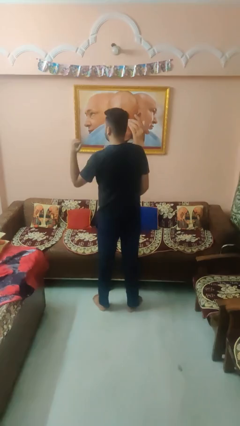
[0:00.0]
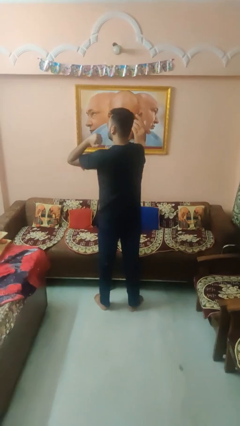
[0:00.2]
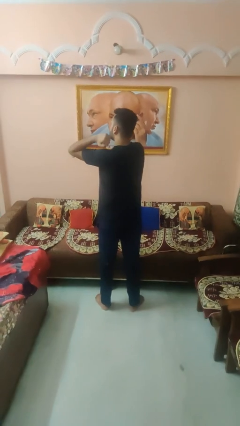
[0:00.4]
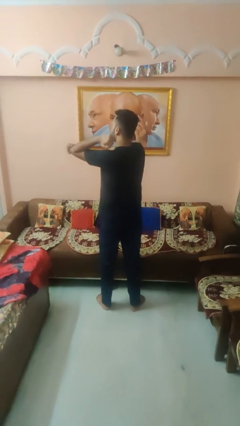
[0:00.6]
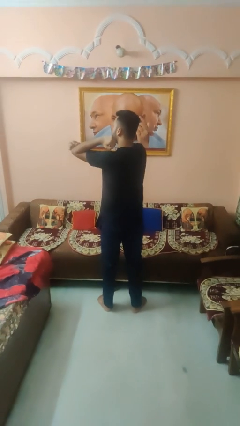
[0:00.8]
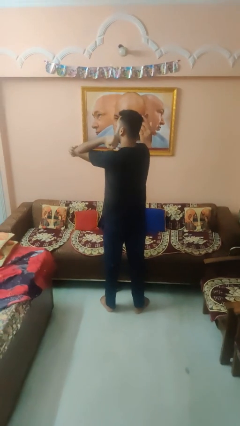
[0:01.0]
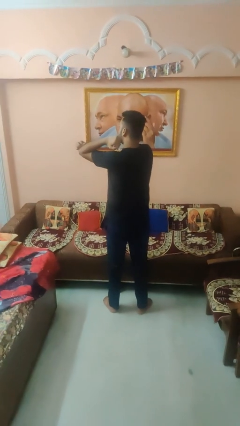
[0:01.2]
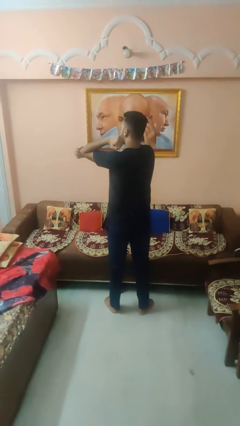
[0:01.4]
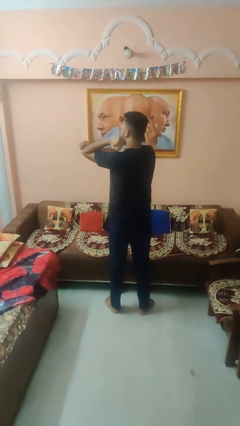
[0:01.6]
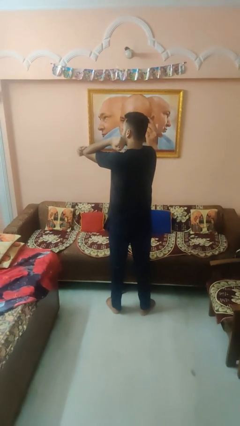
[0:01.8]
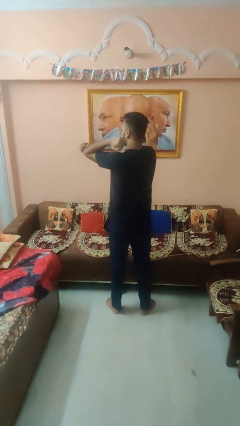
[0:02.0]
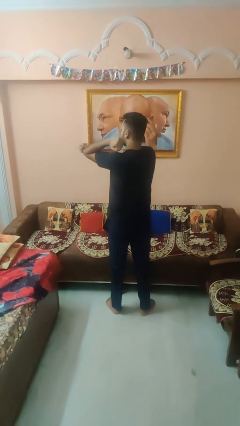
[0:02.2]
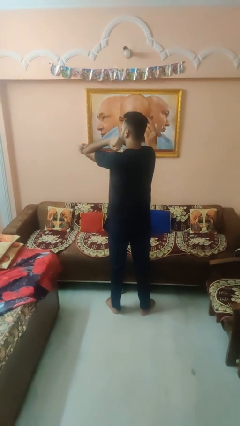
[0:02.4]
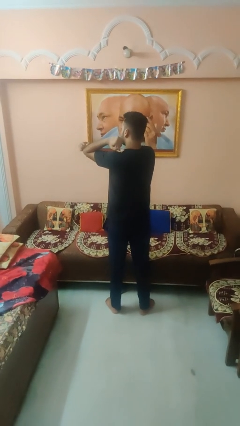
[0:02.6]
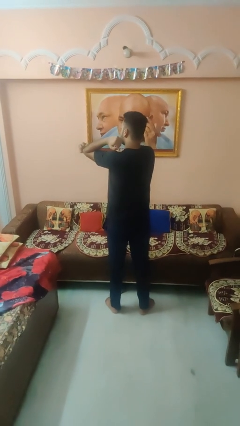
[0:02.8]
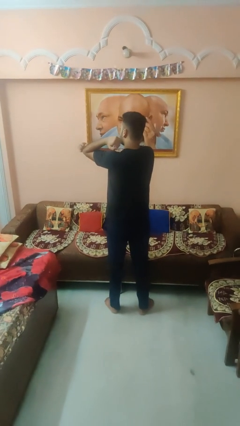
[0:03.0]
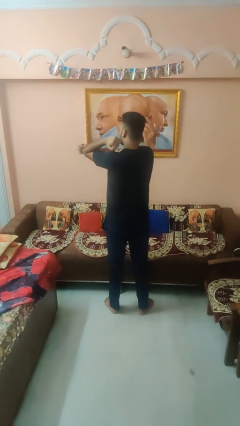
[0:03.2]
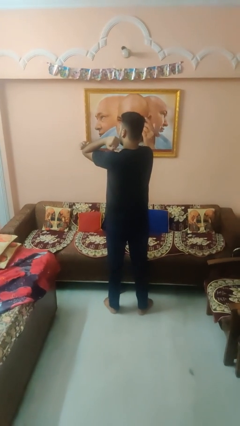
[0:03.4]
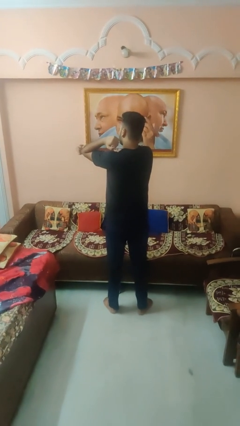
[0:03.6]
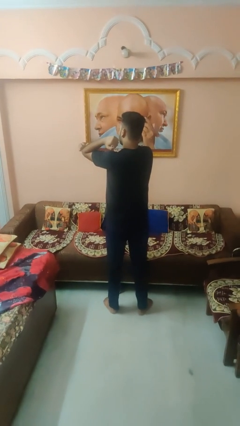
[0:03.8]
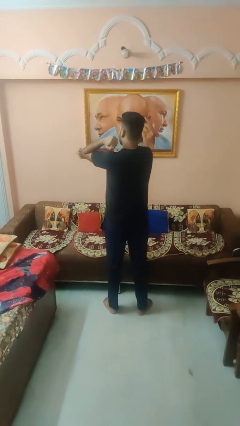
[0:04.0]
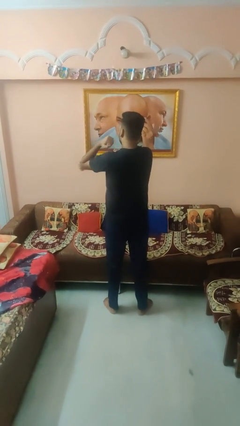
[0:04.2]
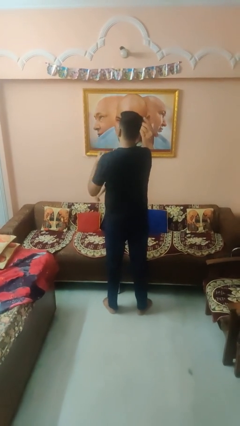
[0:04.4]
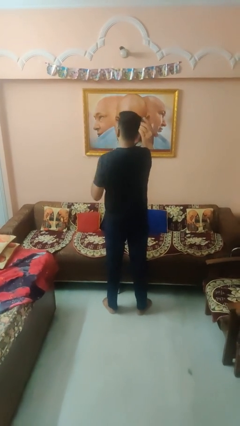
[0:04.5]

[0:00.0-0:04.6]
person scratches face

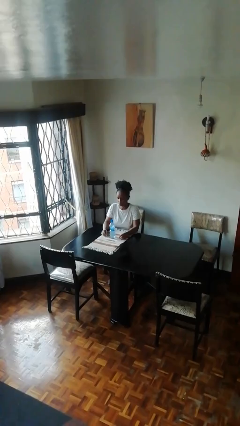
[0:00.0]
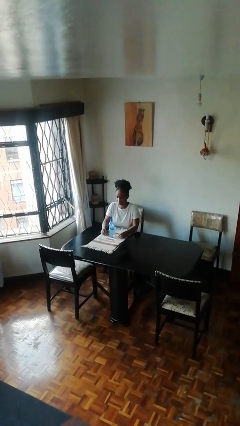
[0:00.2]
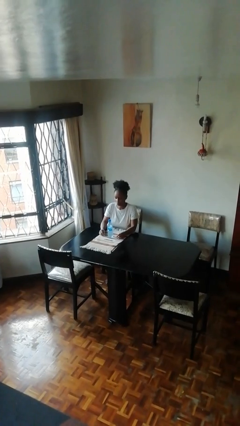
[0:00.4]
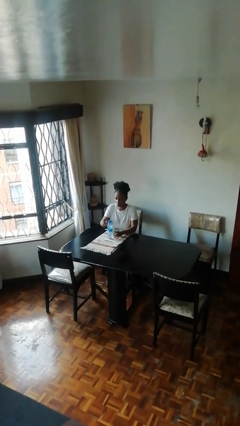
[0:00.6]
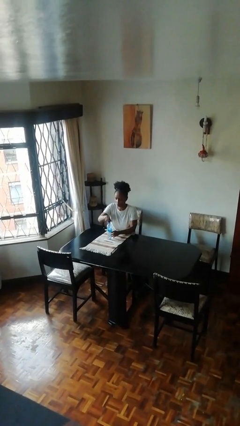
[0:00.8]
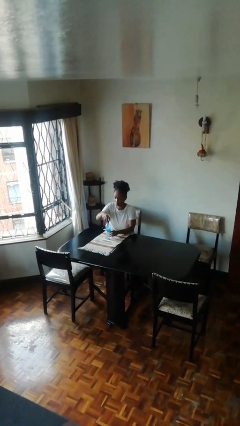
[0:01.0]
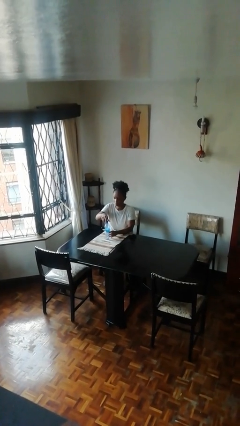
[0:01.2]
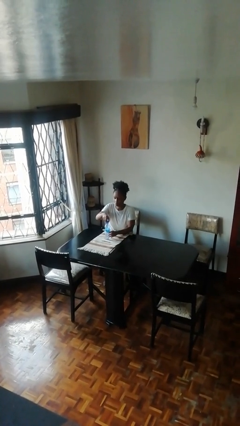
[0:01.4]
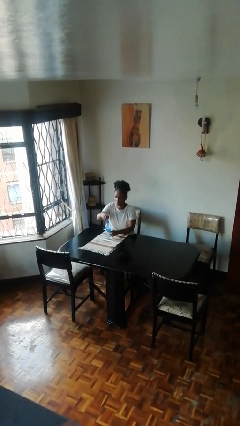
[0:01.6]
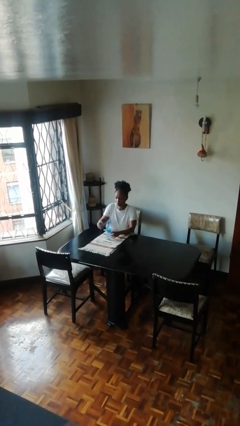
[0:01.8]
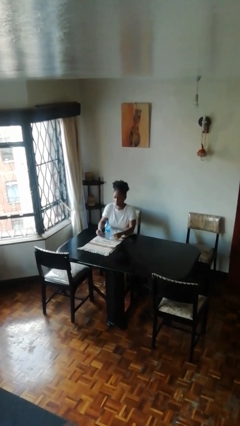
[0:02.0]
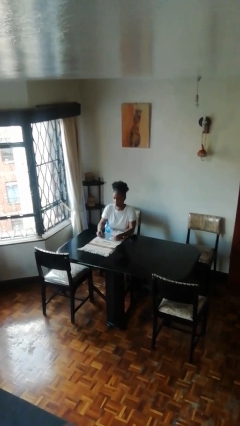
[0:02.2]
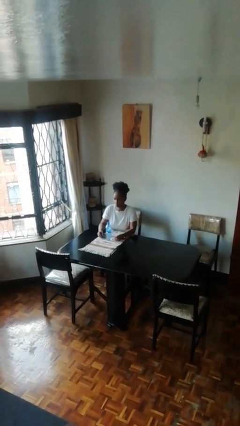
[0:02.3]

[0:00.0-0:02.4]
person unscrews lid from bottle

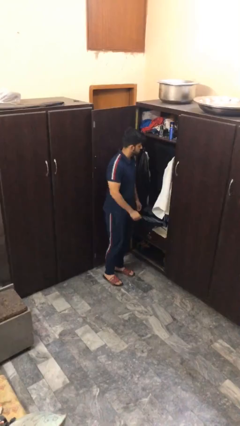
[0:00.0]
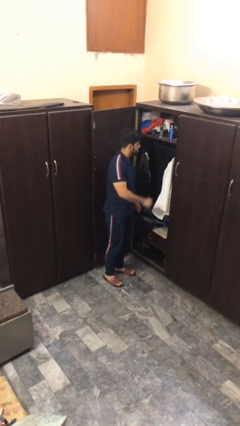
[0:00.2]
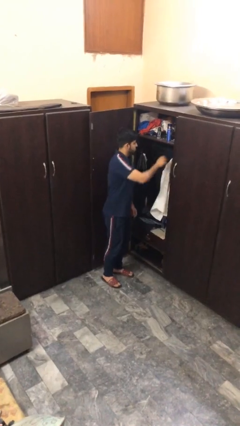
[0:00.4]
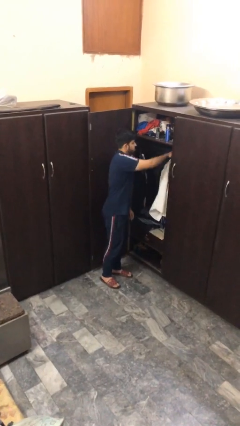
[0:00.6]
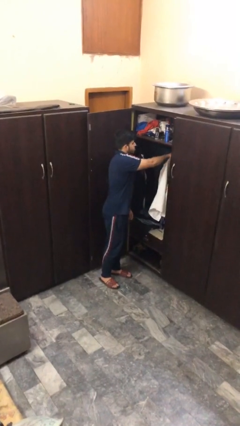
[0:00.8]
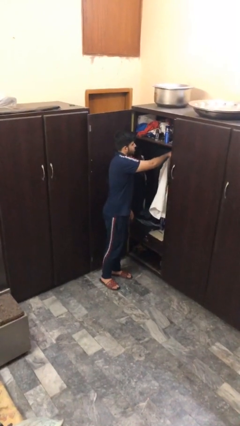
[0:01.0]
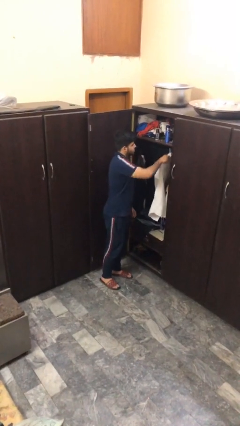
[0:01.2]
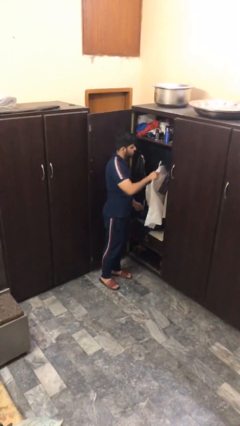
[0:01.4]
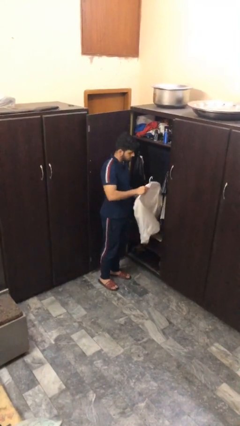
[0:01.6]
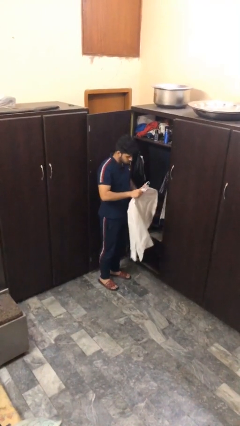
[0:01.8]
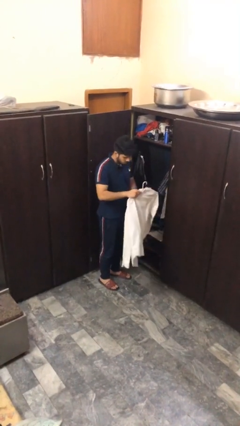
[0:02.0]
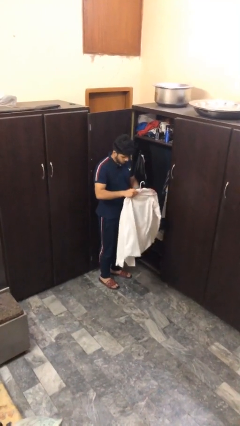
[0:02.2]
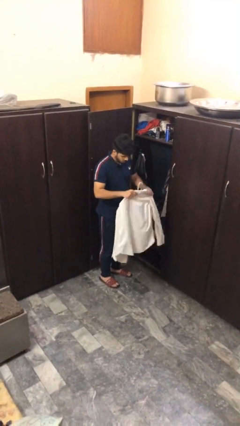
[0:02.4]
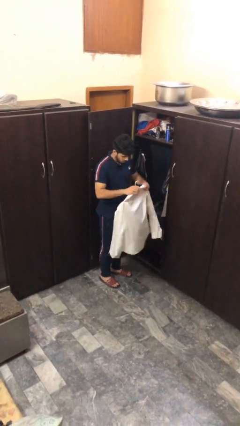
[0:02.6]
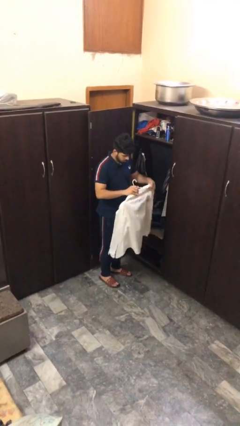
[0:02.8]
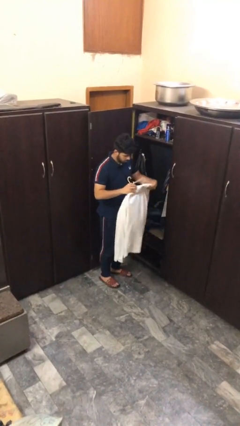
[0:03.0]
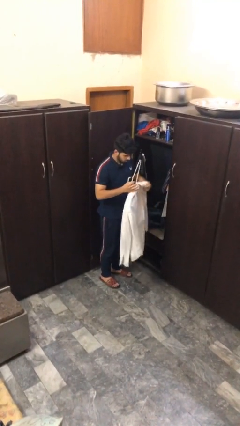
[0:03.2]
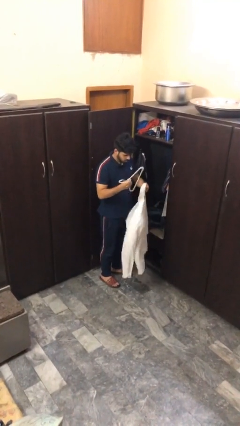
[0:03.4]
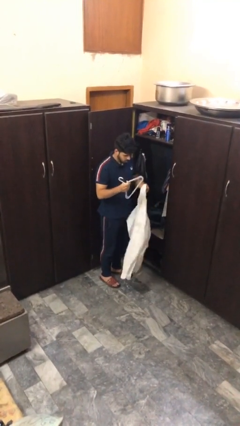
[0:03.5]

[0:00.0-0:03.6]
person takes clothes from closet

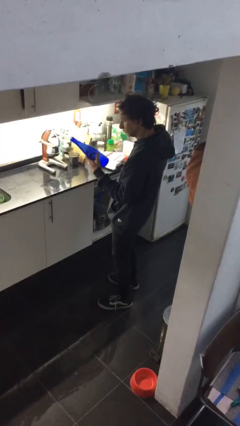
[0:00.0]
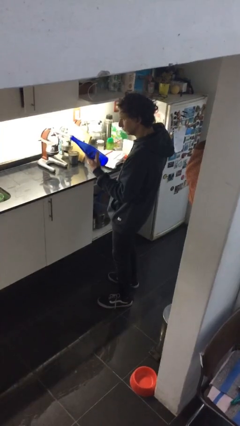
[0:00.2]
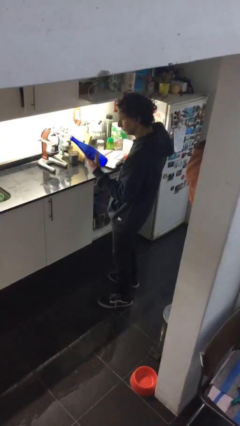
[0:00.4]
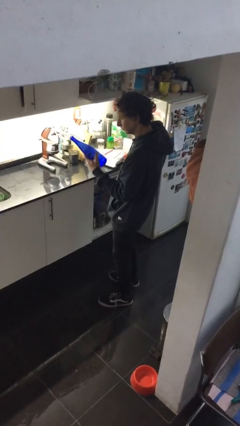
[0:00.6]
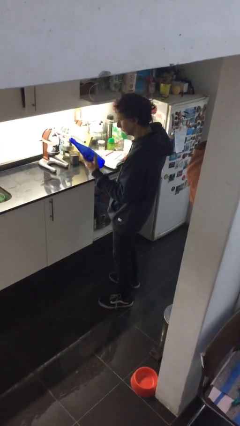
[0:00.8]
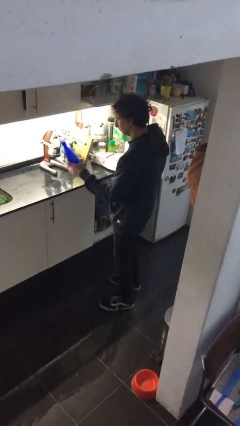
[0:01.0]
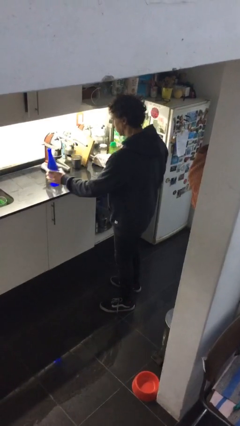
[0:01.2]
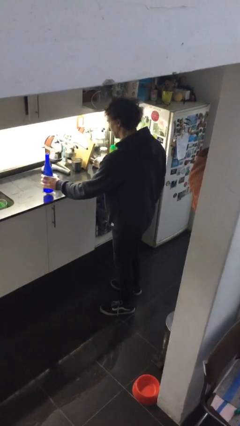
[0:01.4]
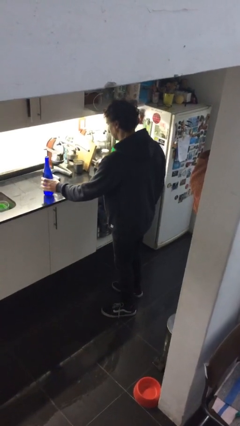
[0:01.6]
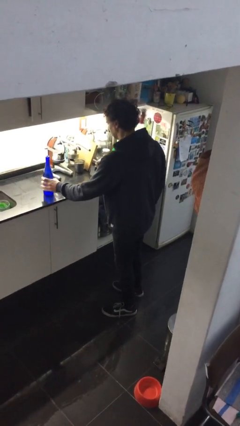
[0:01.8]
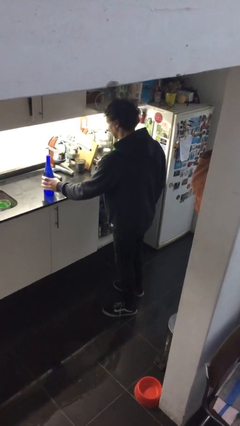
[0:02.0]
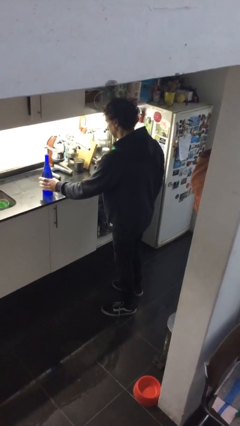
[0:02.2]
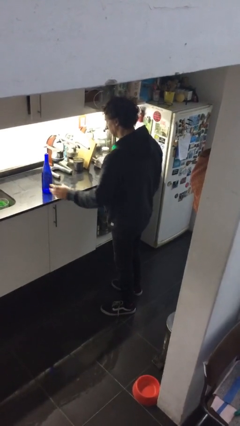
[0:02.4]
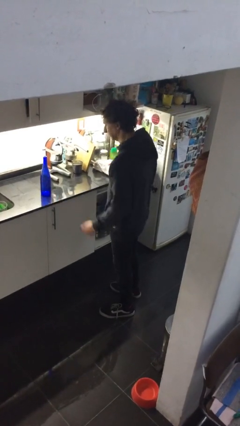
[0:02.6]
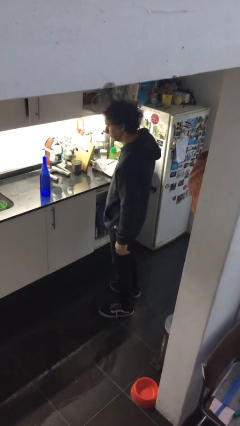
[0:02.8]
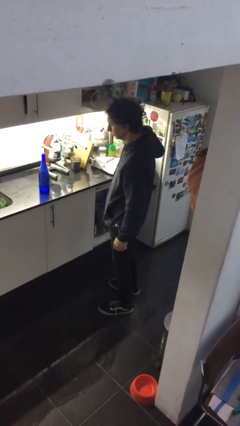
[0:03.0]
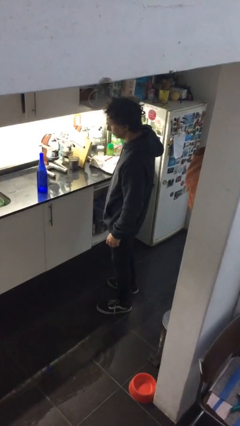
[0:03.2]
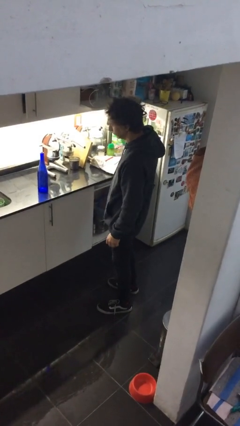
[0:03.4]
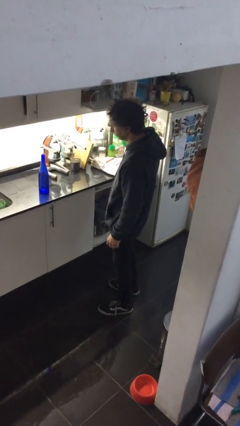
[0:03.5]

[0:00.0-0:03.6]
person puts down object on countertop

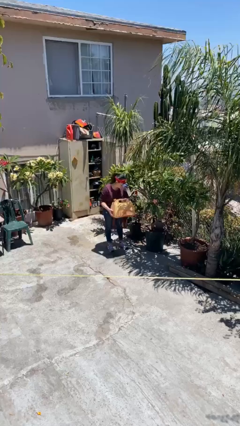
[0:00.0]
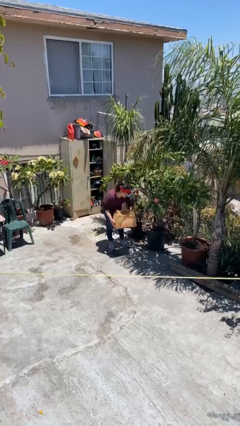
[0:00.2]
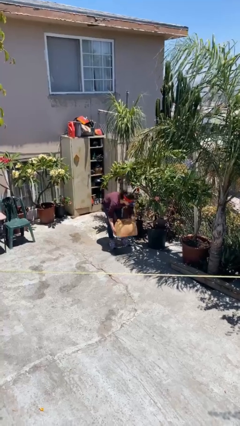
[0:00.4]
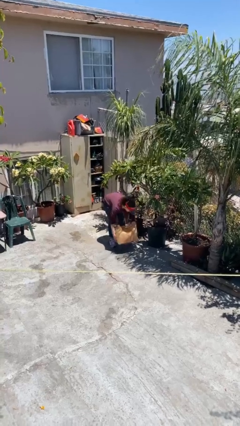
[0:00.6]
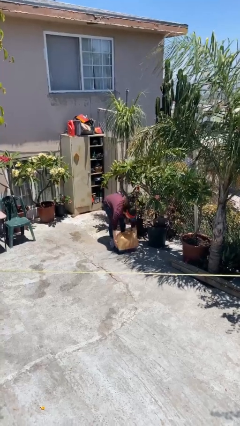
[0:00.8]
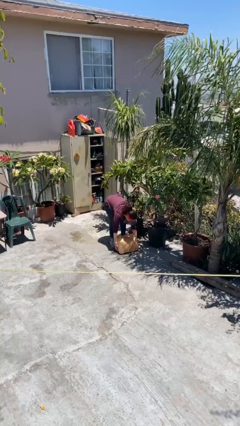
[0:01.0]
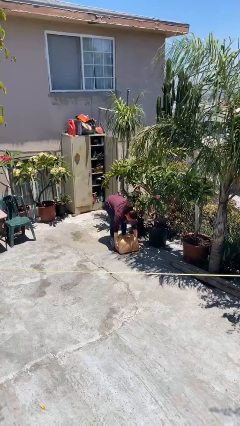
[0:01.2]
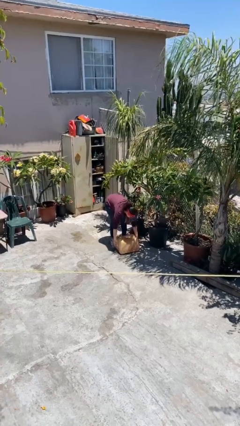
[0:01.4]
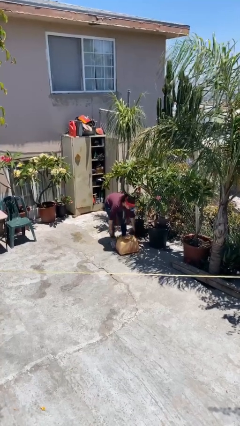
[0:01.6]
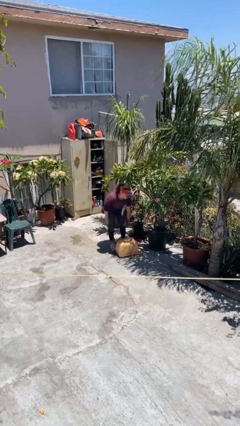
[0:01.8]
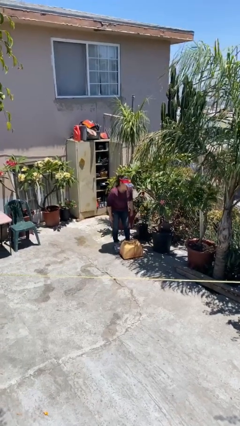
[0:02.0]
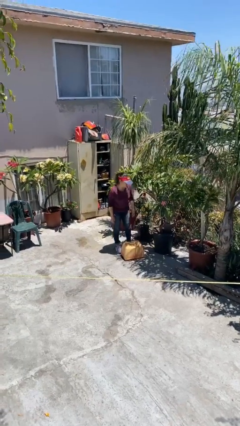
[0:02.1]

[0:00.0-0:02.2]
person puts down object on floor

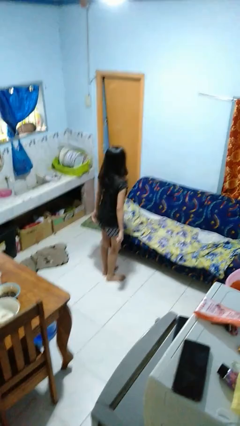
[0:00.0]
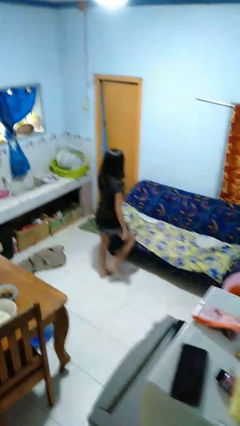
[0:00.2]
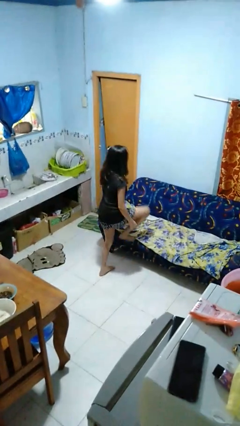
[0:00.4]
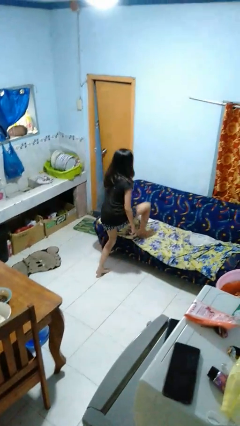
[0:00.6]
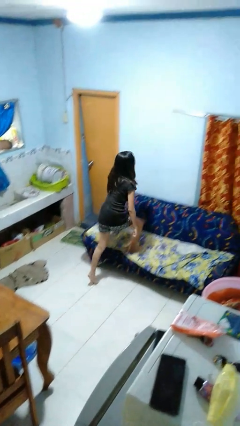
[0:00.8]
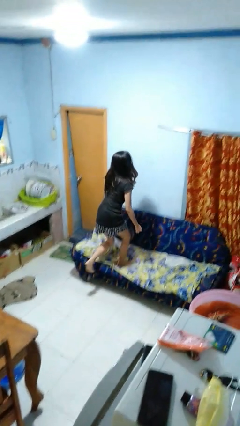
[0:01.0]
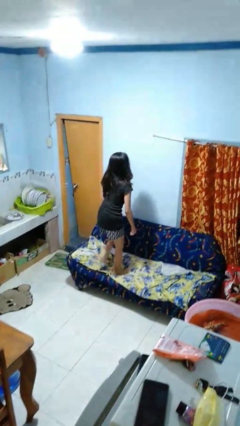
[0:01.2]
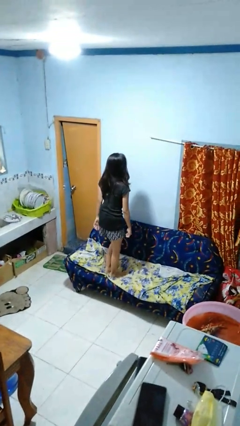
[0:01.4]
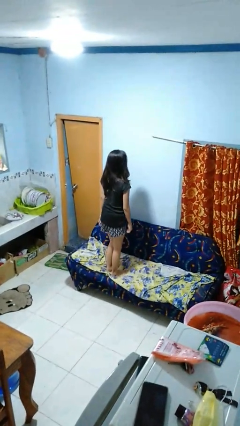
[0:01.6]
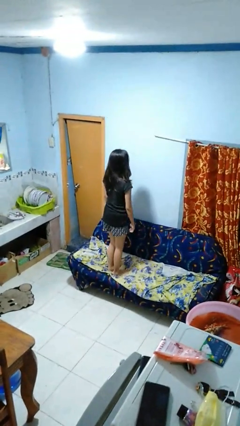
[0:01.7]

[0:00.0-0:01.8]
person climbs on couch
